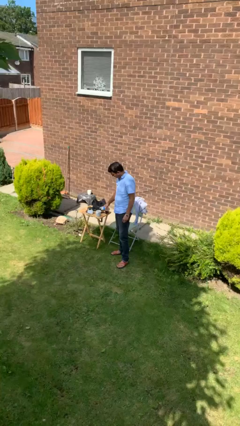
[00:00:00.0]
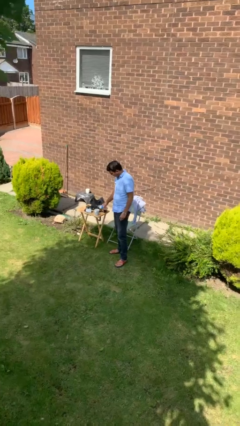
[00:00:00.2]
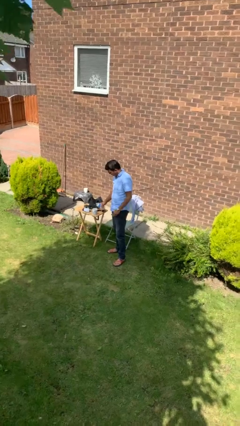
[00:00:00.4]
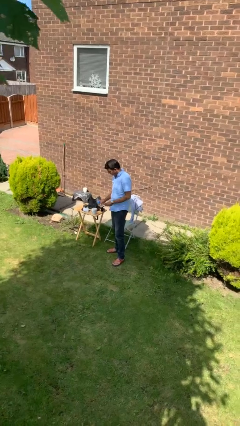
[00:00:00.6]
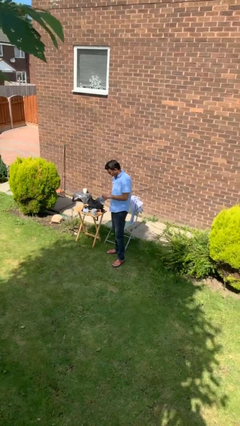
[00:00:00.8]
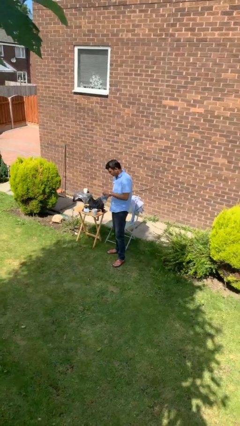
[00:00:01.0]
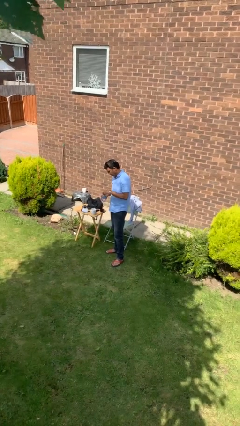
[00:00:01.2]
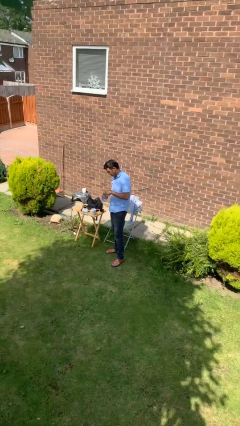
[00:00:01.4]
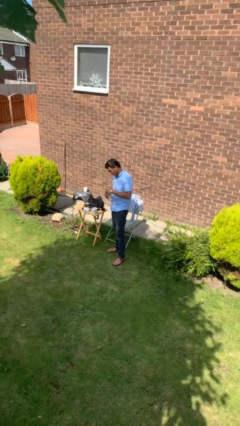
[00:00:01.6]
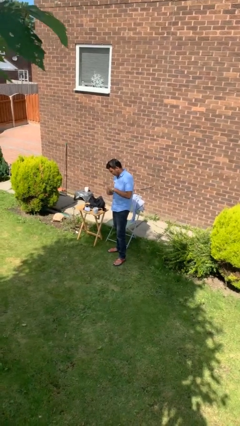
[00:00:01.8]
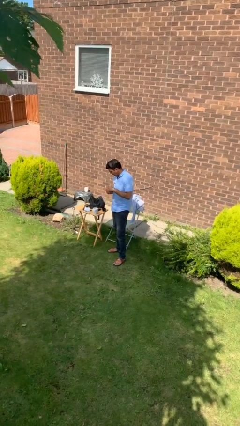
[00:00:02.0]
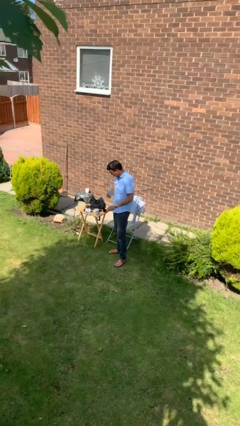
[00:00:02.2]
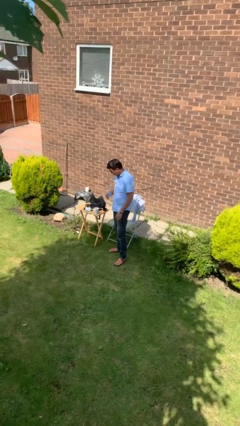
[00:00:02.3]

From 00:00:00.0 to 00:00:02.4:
person screws lid to bottle

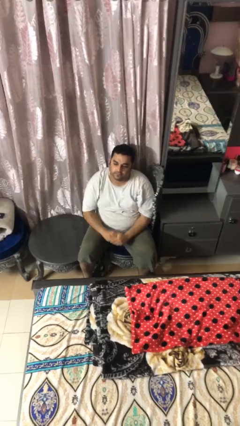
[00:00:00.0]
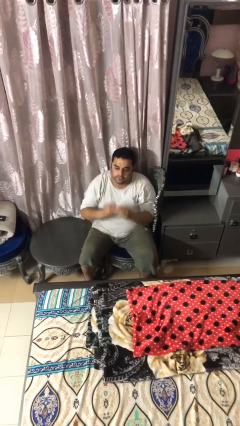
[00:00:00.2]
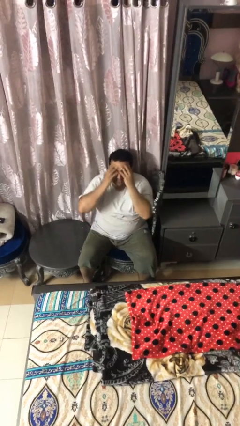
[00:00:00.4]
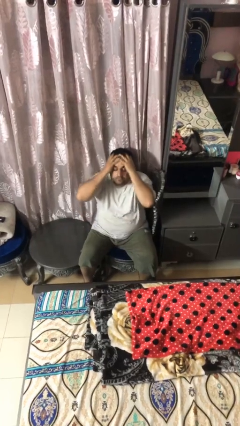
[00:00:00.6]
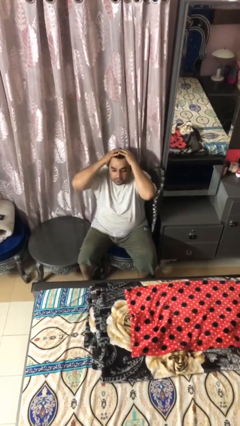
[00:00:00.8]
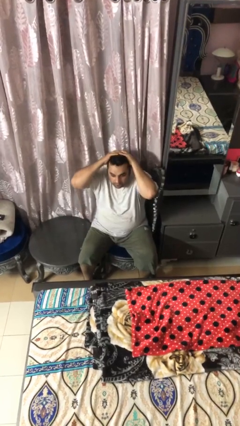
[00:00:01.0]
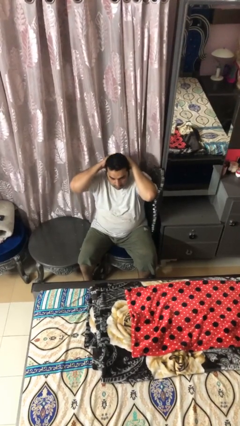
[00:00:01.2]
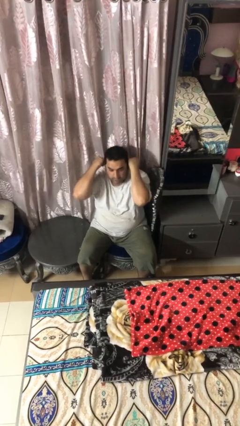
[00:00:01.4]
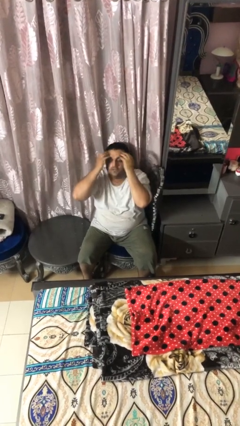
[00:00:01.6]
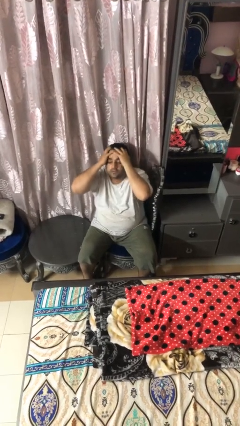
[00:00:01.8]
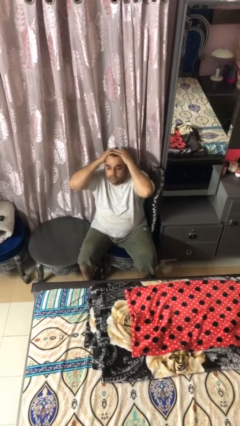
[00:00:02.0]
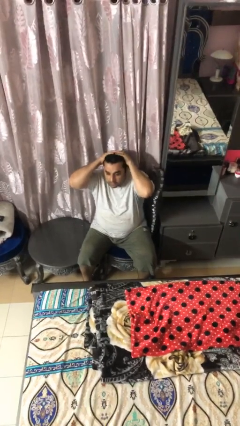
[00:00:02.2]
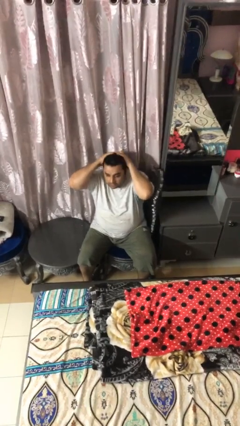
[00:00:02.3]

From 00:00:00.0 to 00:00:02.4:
person strokes hair

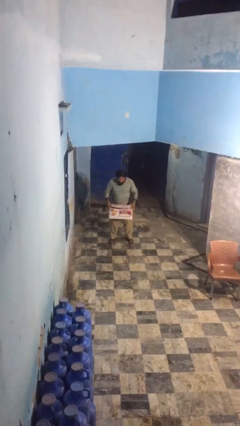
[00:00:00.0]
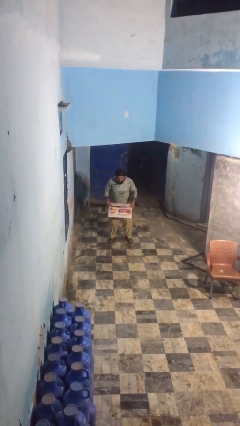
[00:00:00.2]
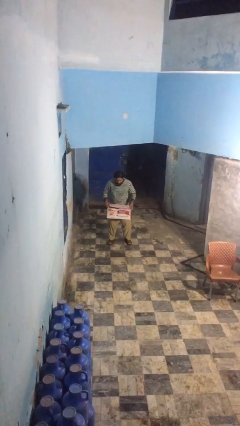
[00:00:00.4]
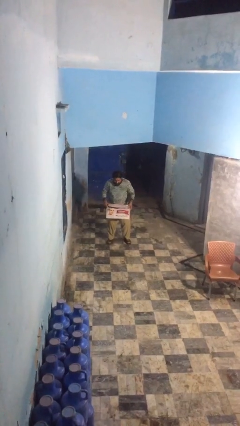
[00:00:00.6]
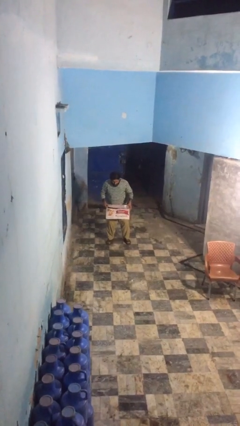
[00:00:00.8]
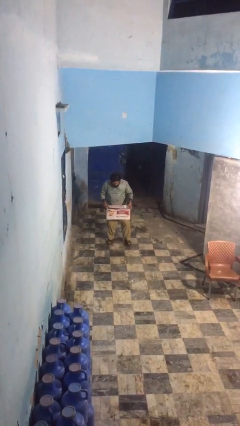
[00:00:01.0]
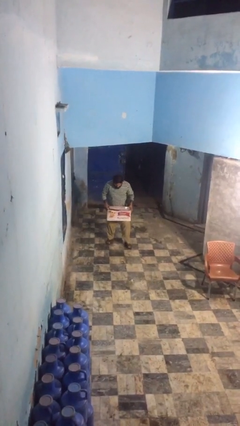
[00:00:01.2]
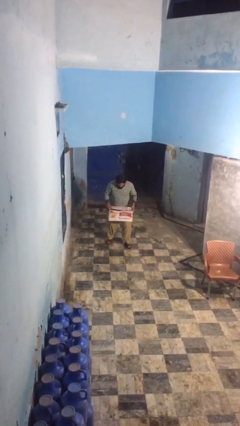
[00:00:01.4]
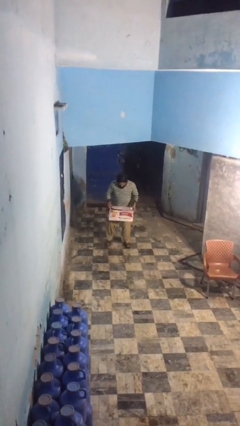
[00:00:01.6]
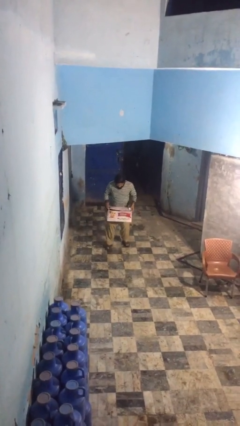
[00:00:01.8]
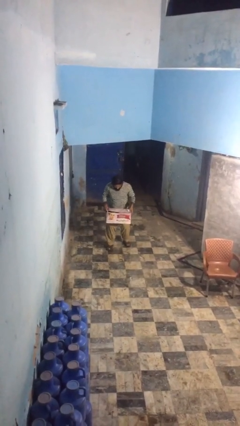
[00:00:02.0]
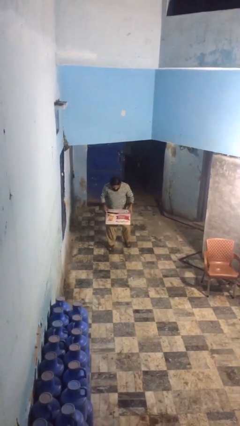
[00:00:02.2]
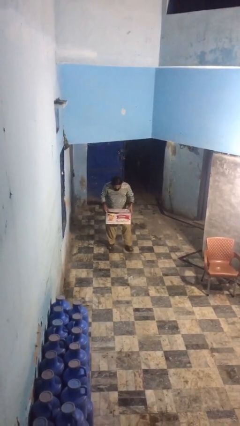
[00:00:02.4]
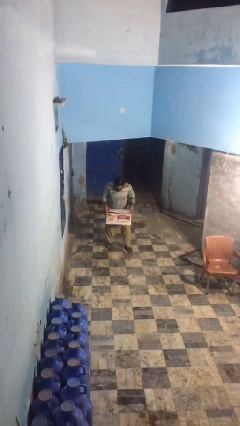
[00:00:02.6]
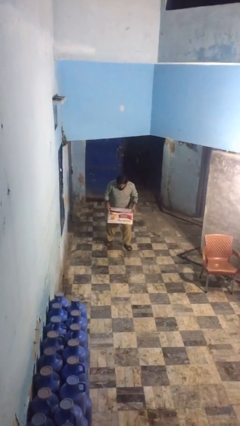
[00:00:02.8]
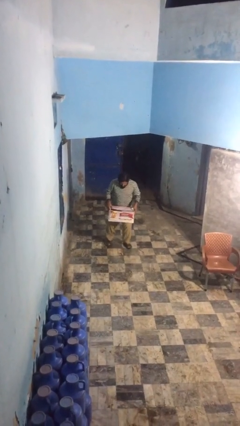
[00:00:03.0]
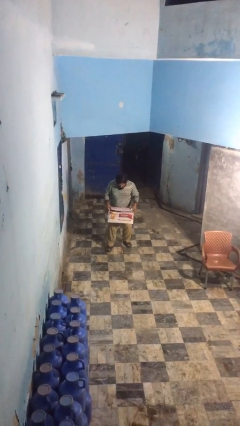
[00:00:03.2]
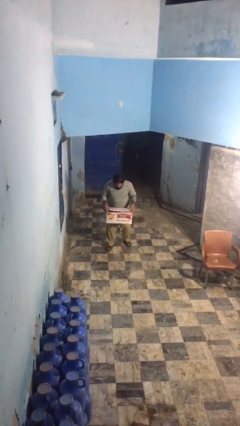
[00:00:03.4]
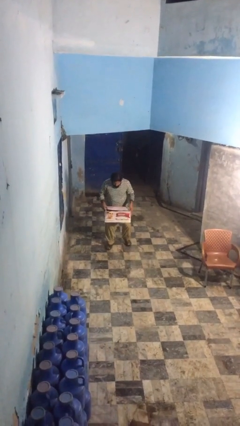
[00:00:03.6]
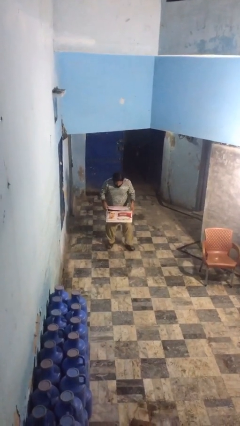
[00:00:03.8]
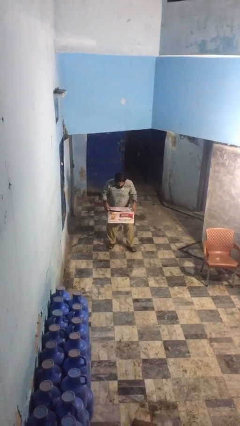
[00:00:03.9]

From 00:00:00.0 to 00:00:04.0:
person carries heavy object

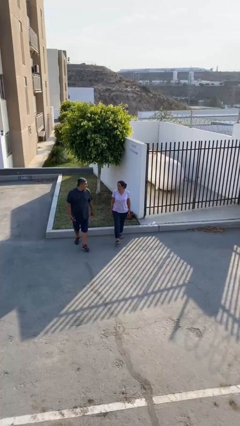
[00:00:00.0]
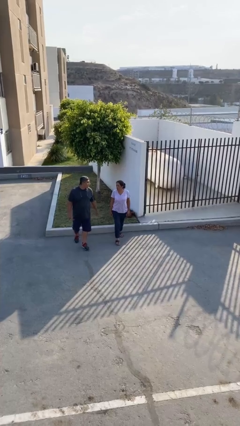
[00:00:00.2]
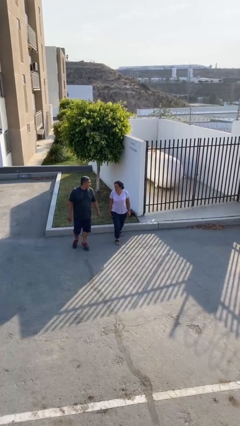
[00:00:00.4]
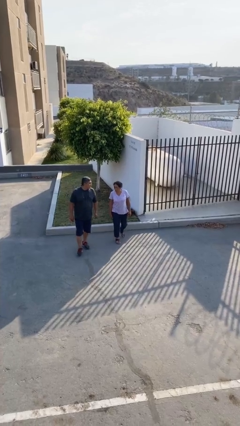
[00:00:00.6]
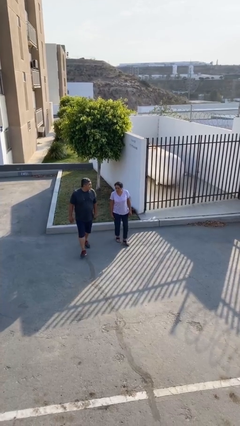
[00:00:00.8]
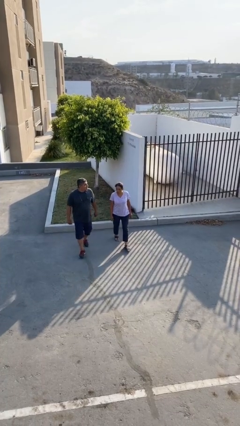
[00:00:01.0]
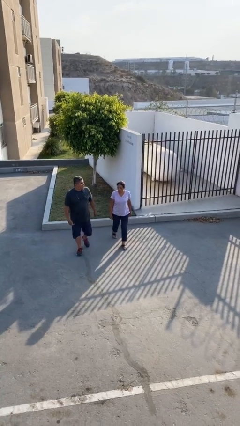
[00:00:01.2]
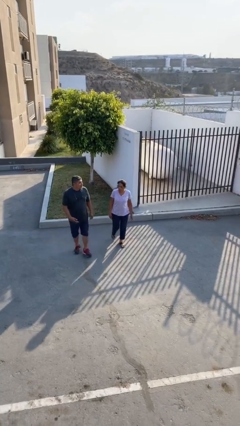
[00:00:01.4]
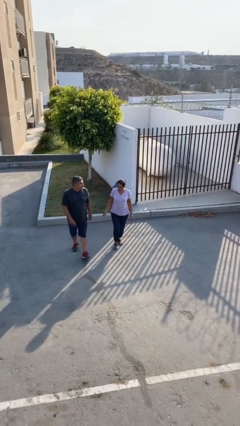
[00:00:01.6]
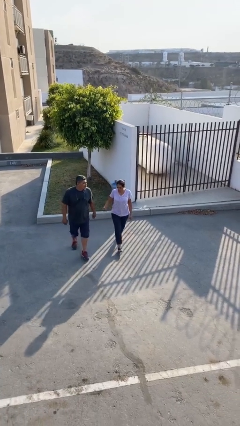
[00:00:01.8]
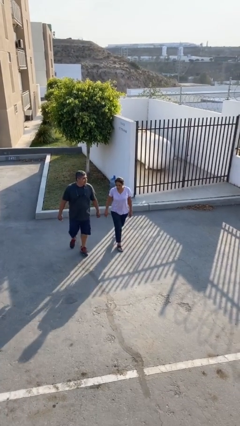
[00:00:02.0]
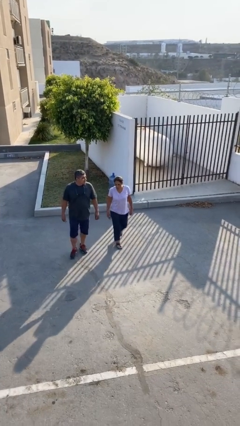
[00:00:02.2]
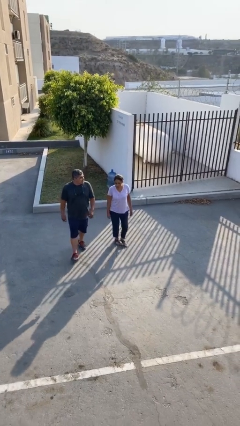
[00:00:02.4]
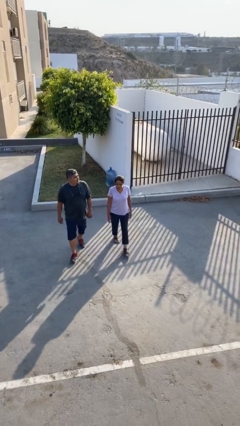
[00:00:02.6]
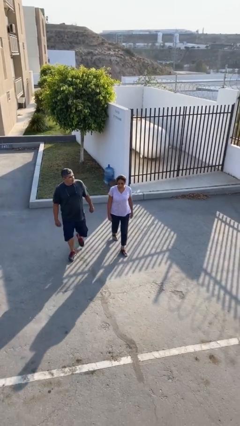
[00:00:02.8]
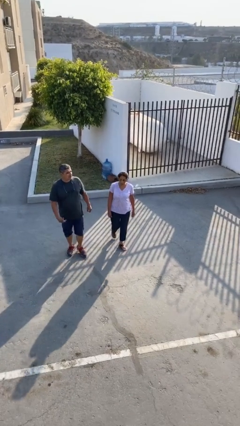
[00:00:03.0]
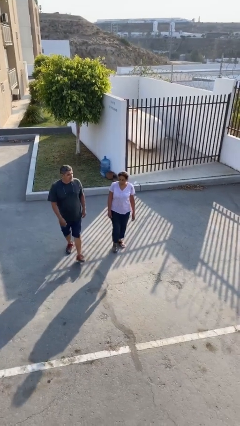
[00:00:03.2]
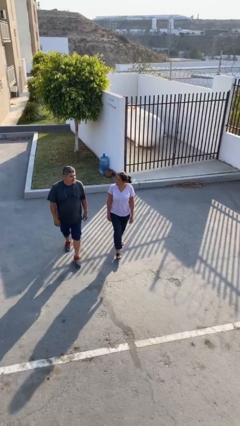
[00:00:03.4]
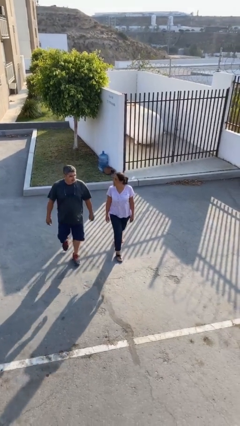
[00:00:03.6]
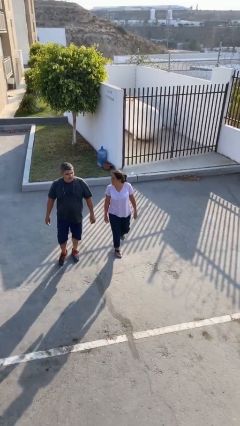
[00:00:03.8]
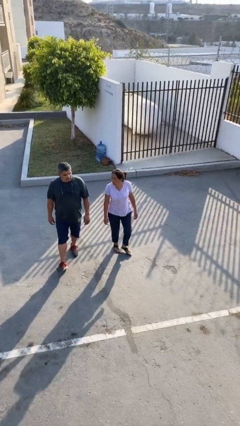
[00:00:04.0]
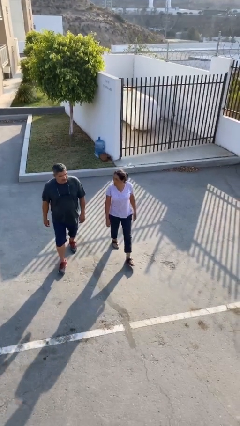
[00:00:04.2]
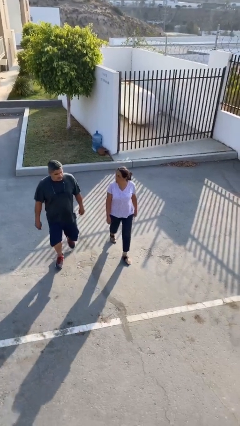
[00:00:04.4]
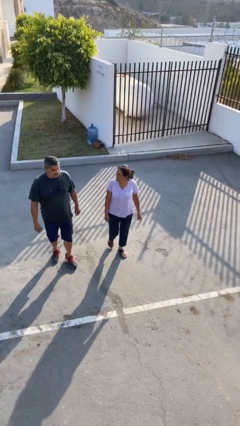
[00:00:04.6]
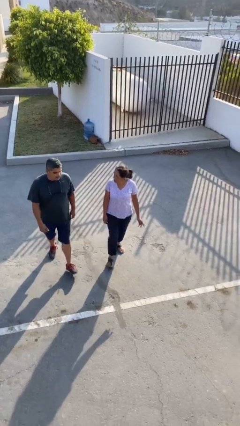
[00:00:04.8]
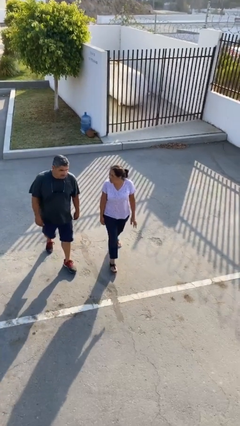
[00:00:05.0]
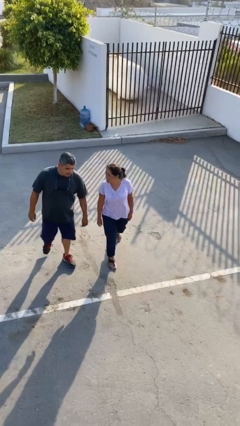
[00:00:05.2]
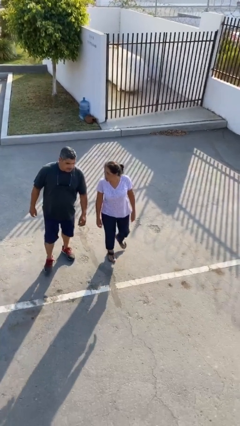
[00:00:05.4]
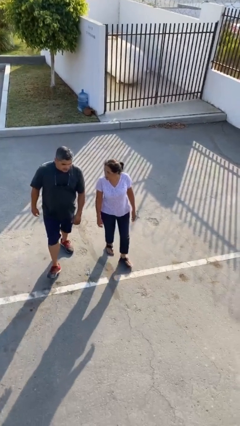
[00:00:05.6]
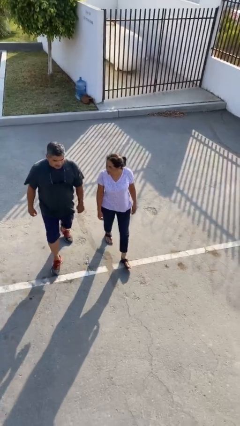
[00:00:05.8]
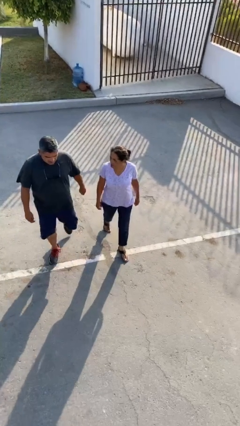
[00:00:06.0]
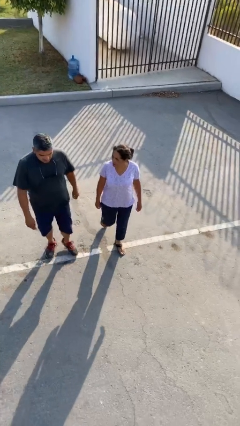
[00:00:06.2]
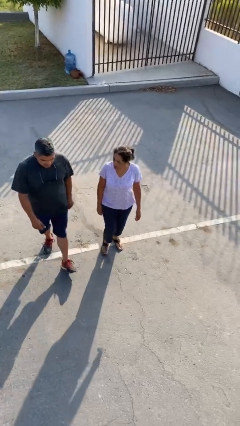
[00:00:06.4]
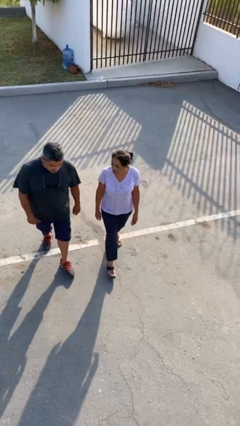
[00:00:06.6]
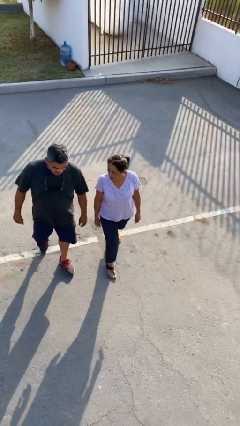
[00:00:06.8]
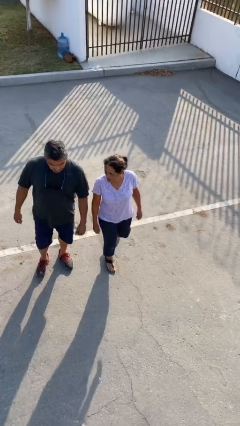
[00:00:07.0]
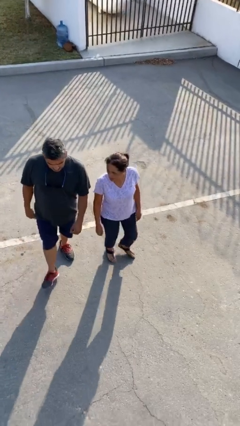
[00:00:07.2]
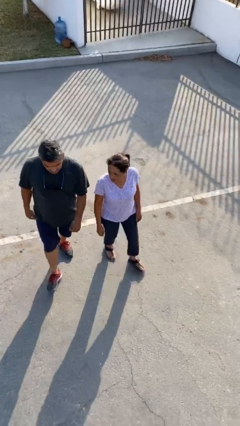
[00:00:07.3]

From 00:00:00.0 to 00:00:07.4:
person talks to person

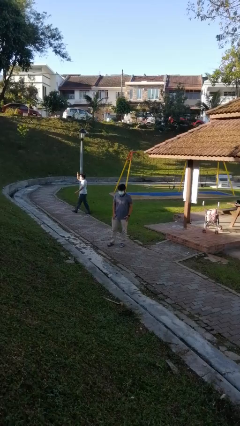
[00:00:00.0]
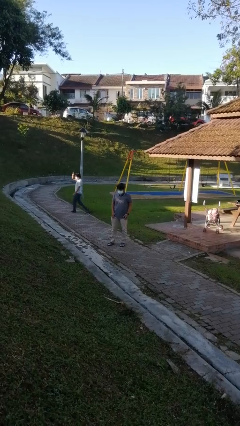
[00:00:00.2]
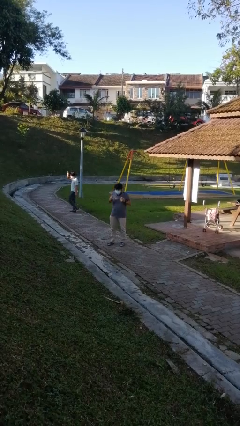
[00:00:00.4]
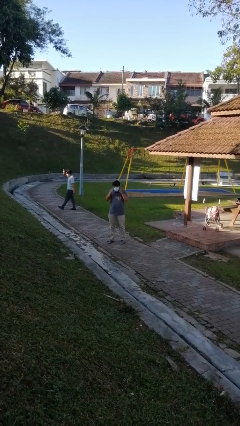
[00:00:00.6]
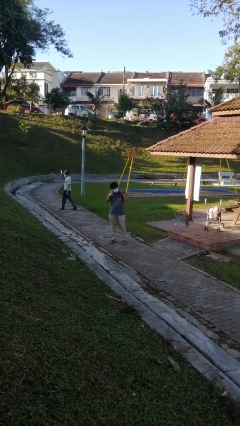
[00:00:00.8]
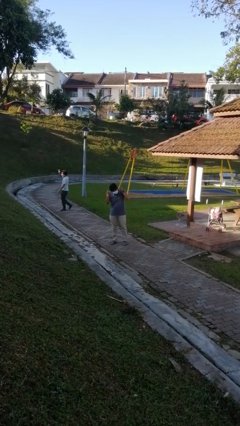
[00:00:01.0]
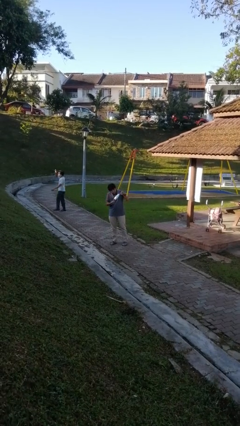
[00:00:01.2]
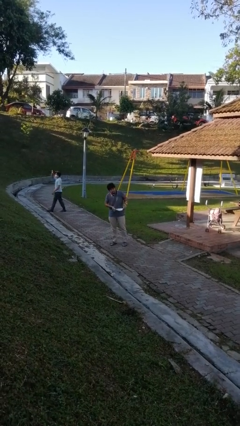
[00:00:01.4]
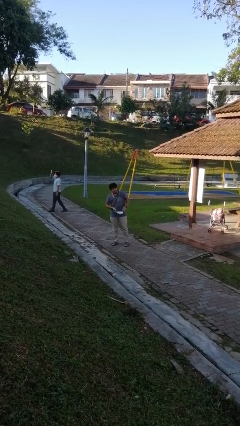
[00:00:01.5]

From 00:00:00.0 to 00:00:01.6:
person takes off facemask
